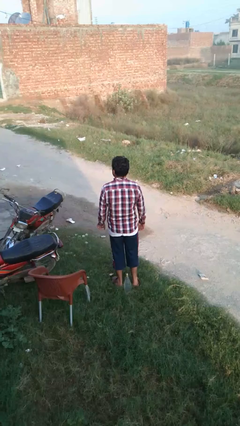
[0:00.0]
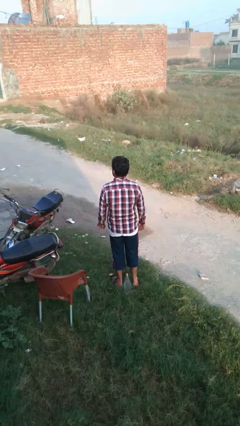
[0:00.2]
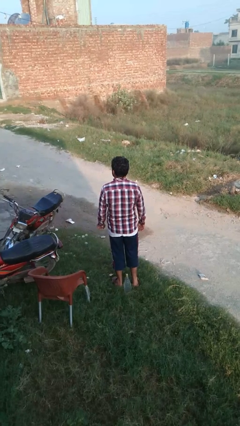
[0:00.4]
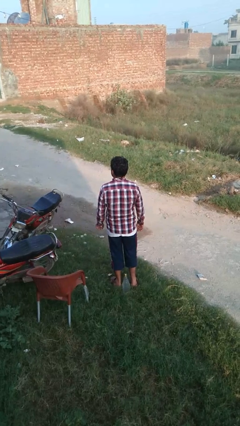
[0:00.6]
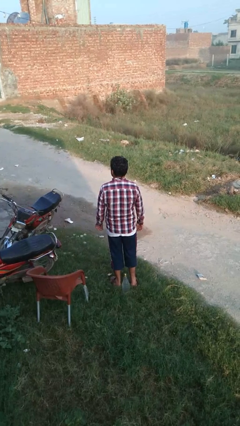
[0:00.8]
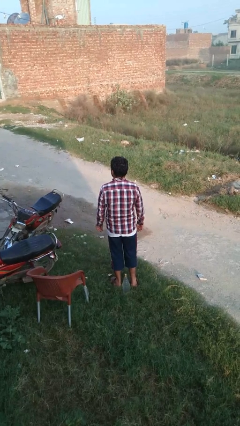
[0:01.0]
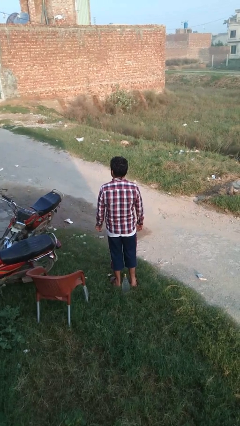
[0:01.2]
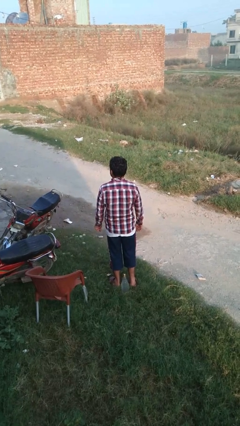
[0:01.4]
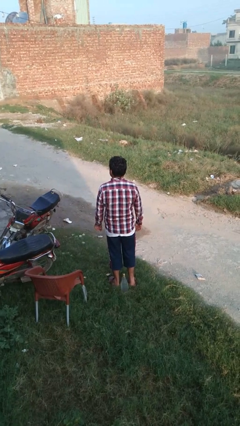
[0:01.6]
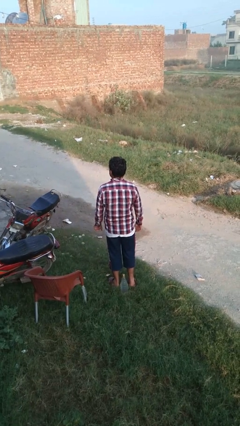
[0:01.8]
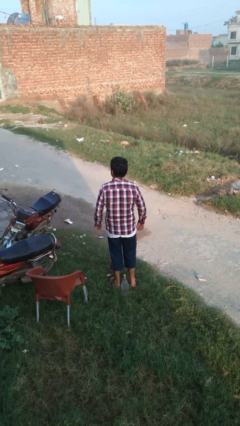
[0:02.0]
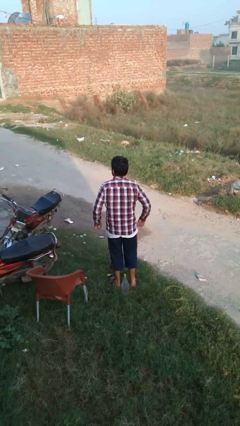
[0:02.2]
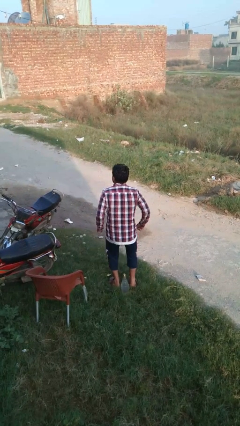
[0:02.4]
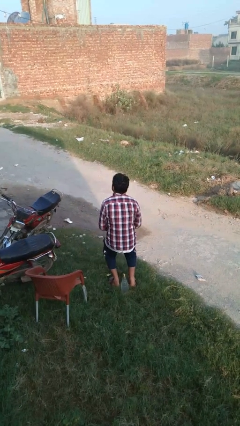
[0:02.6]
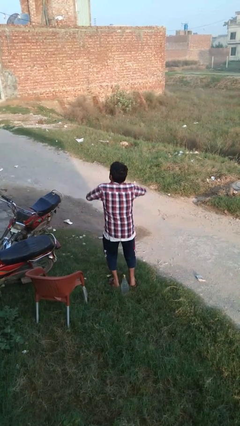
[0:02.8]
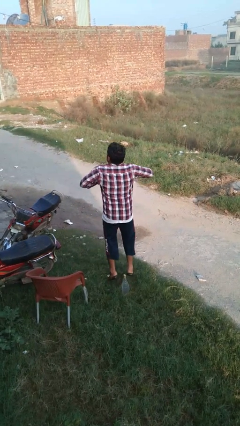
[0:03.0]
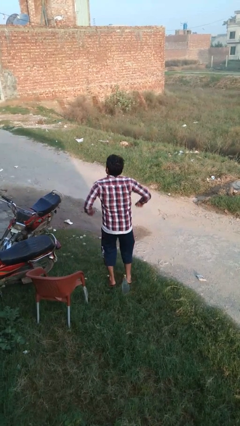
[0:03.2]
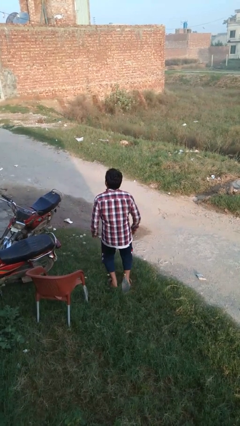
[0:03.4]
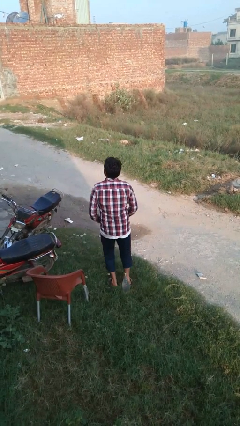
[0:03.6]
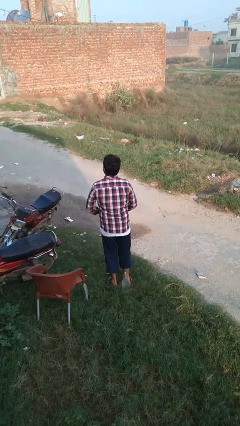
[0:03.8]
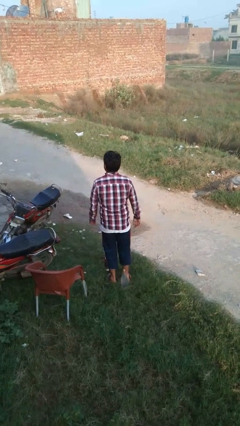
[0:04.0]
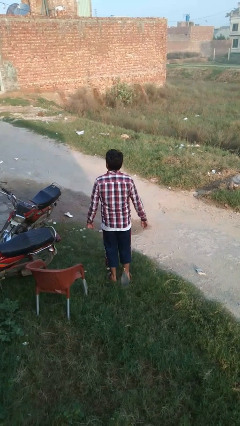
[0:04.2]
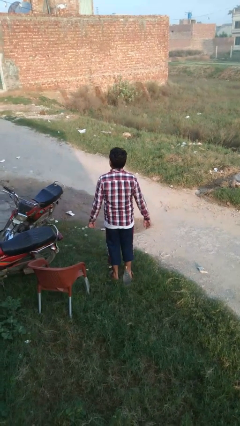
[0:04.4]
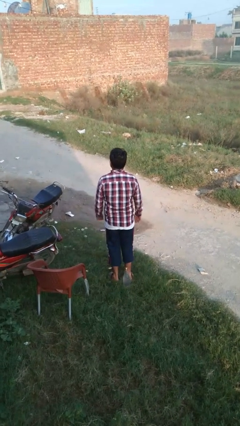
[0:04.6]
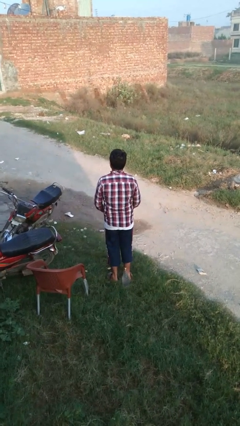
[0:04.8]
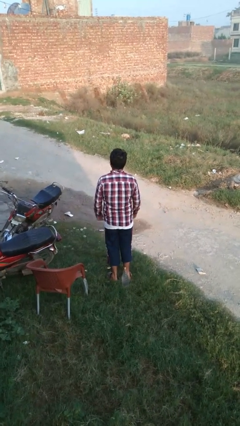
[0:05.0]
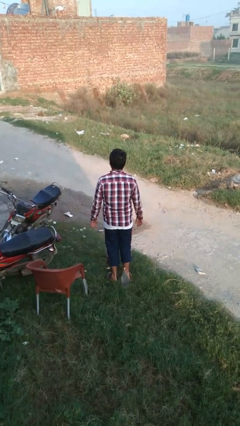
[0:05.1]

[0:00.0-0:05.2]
person jumps

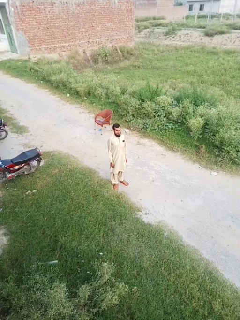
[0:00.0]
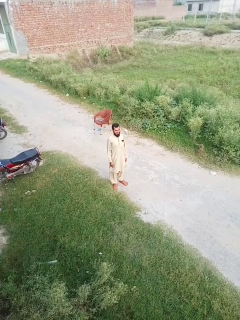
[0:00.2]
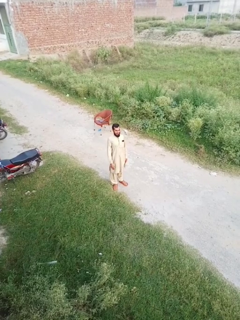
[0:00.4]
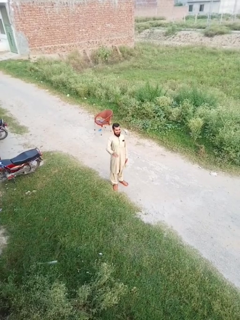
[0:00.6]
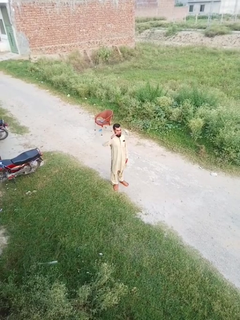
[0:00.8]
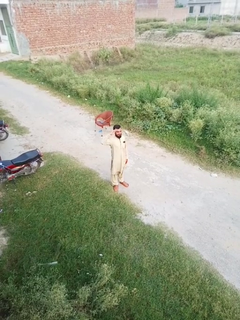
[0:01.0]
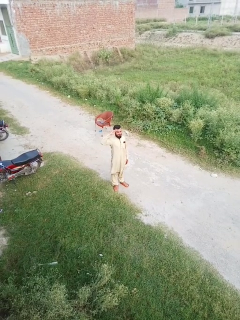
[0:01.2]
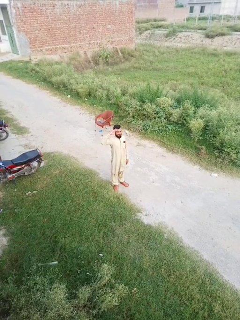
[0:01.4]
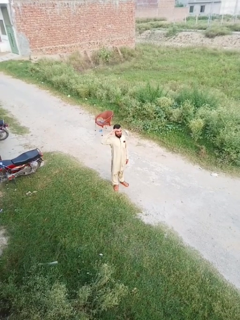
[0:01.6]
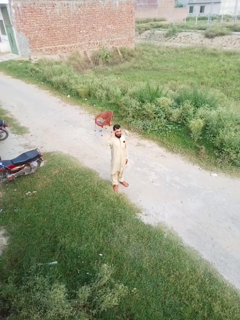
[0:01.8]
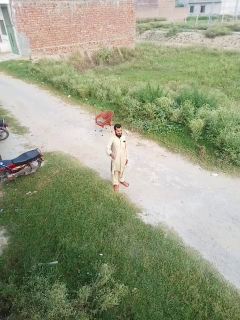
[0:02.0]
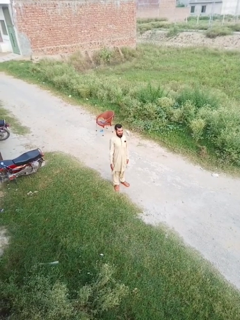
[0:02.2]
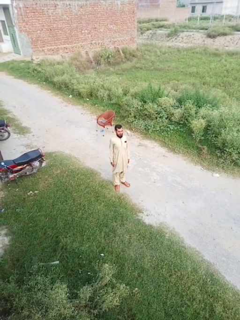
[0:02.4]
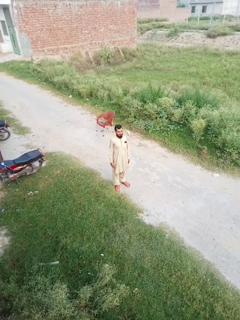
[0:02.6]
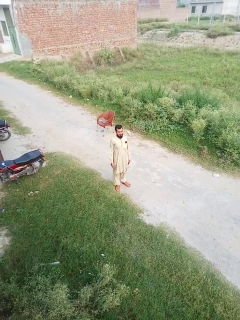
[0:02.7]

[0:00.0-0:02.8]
person salutes

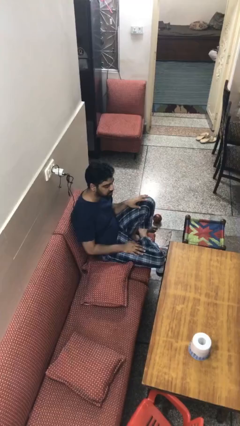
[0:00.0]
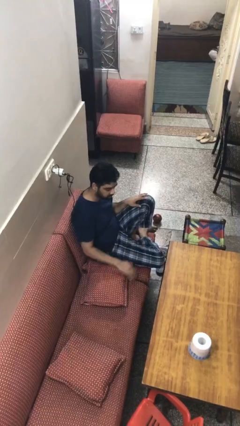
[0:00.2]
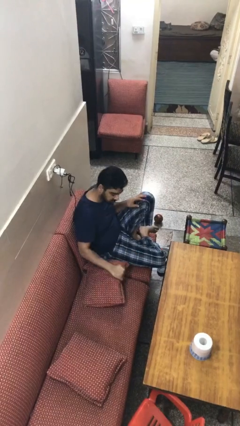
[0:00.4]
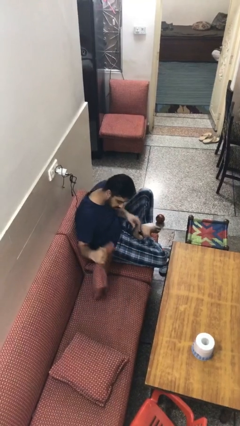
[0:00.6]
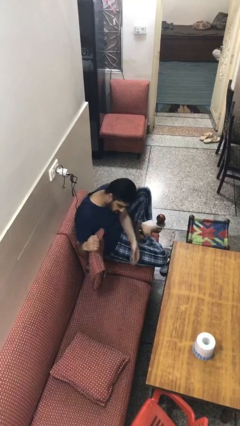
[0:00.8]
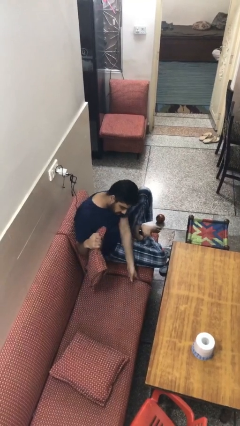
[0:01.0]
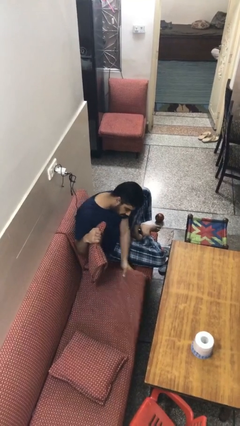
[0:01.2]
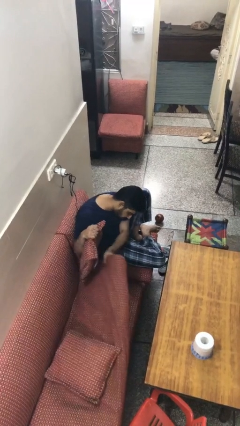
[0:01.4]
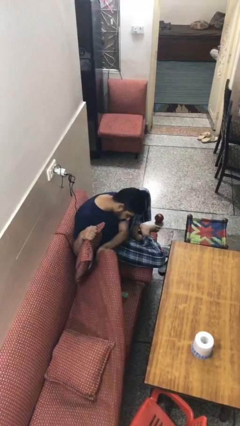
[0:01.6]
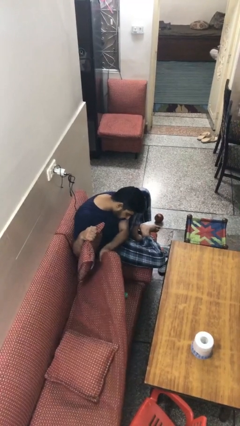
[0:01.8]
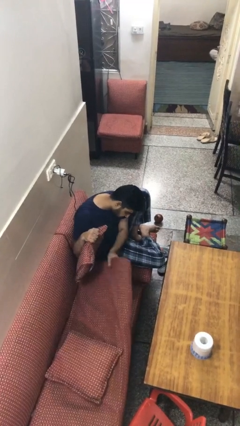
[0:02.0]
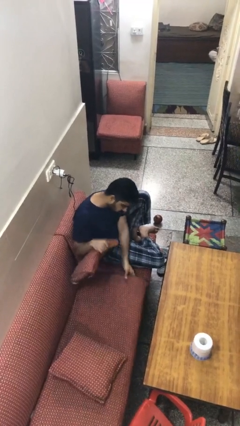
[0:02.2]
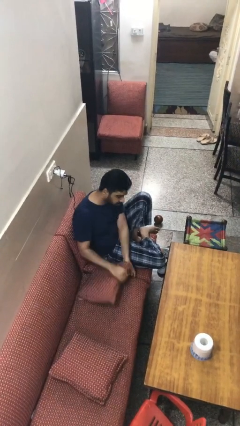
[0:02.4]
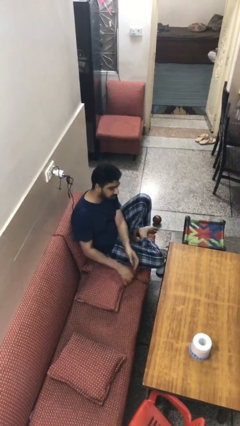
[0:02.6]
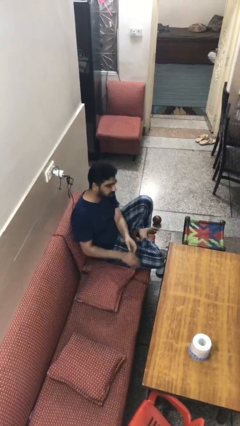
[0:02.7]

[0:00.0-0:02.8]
person searches under couch

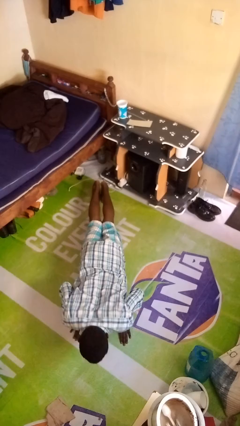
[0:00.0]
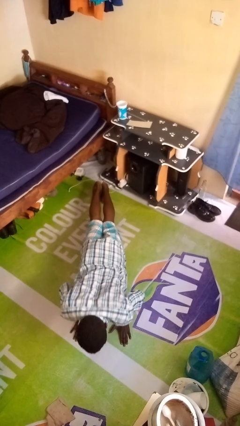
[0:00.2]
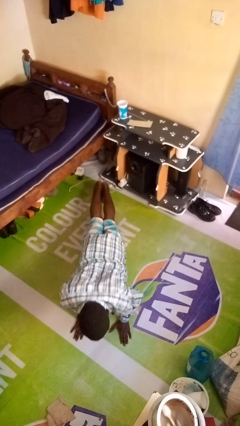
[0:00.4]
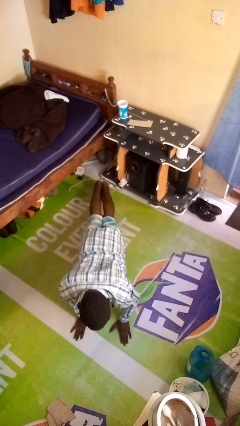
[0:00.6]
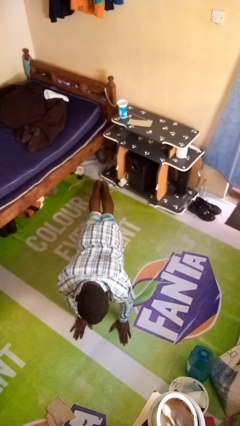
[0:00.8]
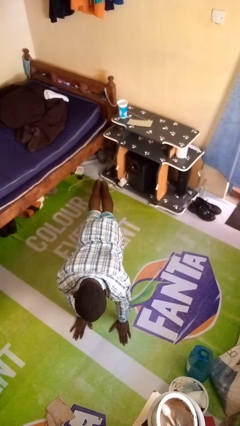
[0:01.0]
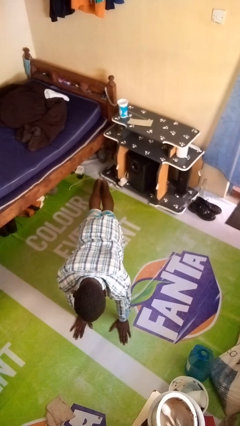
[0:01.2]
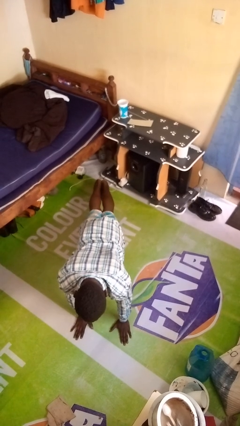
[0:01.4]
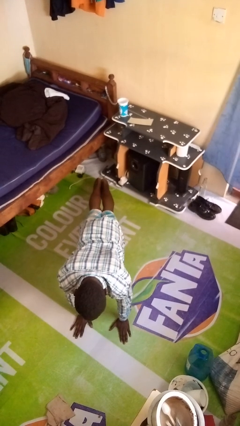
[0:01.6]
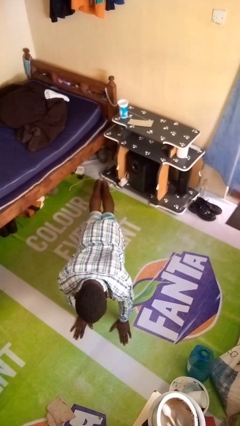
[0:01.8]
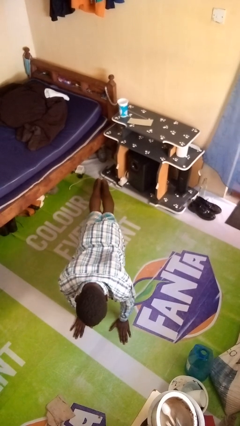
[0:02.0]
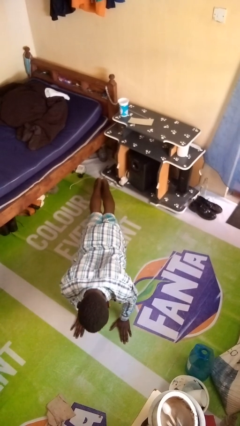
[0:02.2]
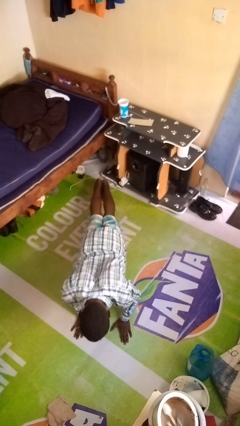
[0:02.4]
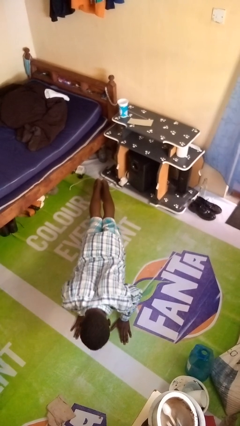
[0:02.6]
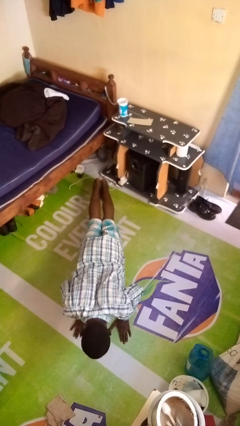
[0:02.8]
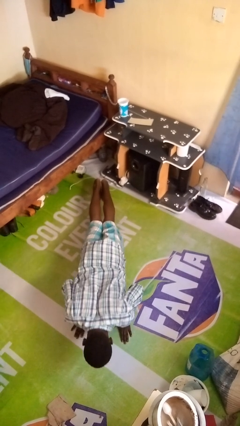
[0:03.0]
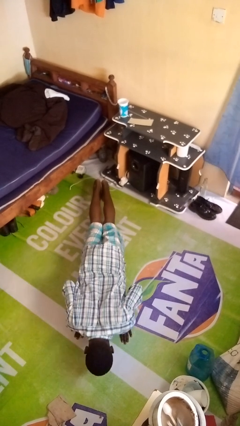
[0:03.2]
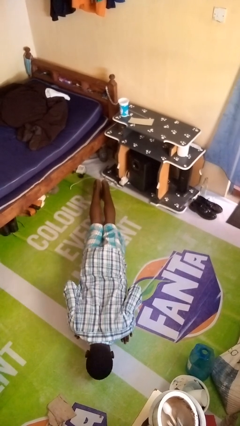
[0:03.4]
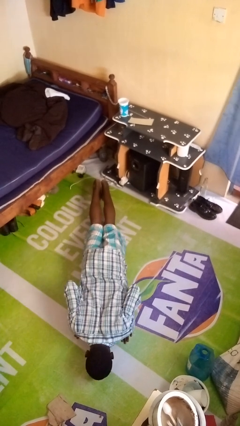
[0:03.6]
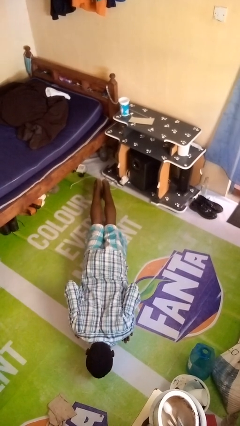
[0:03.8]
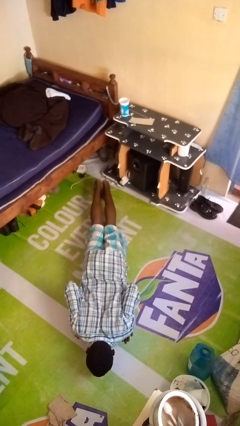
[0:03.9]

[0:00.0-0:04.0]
person exercises with pushup

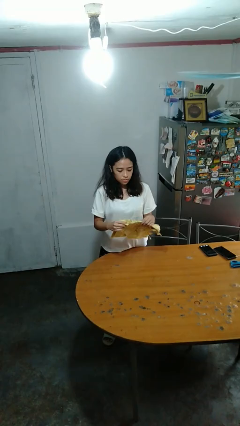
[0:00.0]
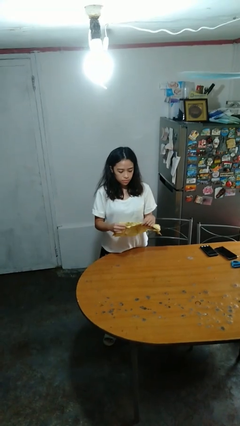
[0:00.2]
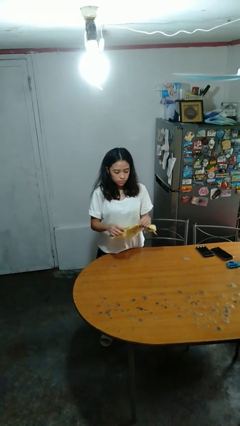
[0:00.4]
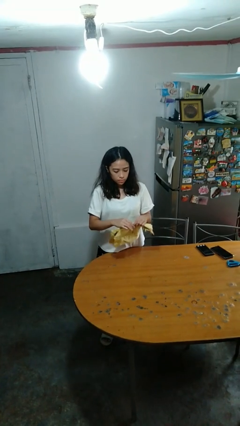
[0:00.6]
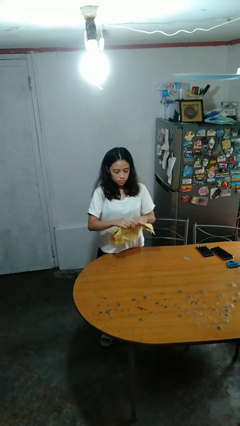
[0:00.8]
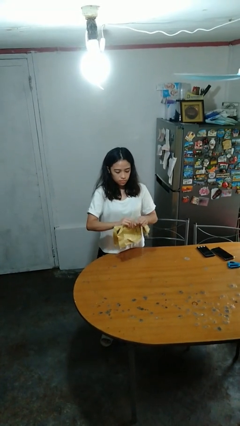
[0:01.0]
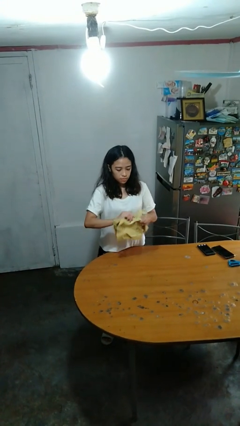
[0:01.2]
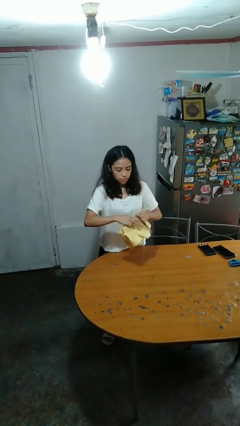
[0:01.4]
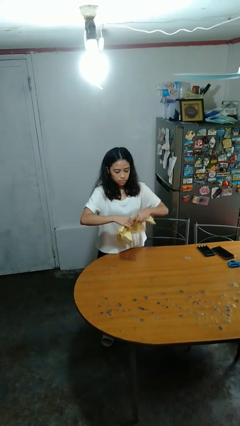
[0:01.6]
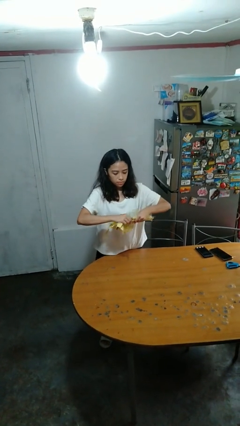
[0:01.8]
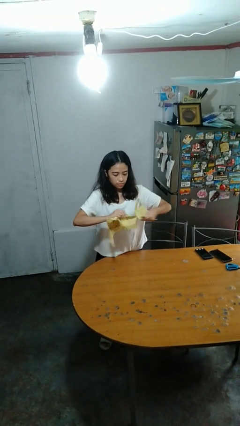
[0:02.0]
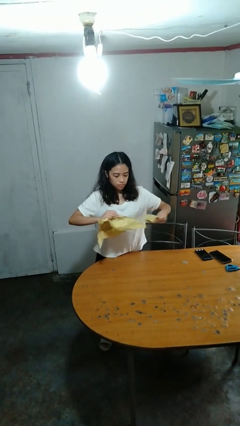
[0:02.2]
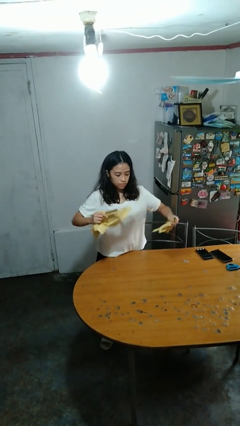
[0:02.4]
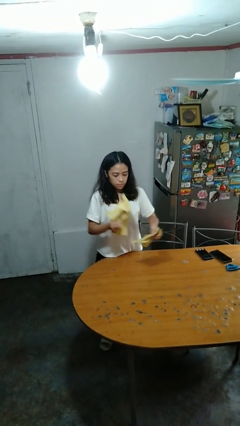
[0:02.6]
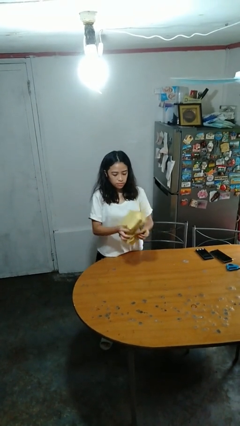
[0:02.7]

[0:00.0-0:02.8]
person tears paper

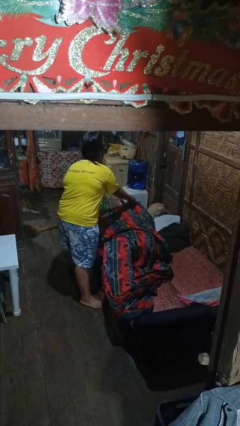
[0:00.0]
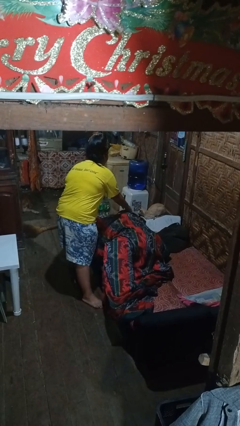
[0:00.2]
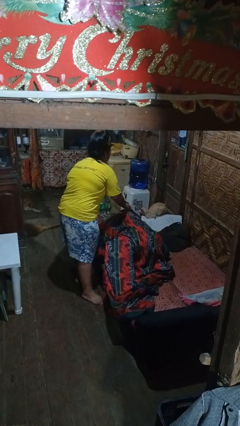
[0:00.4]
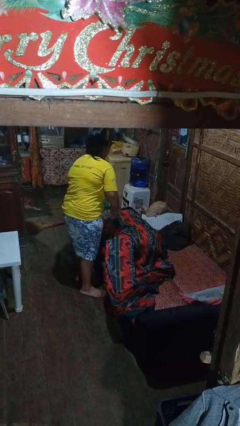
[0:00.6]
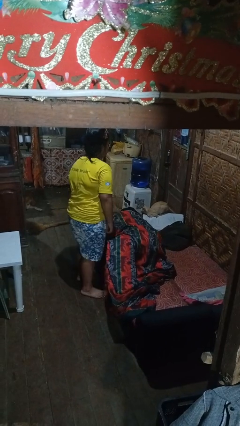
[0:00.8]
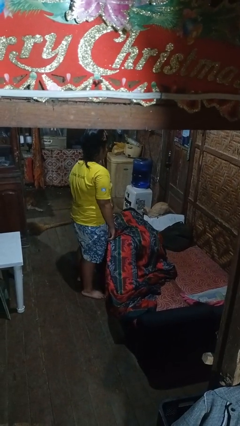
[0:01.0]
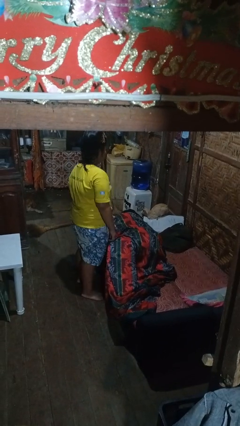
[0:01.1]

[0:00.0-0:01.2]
person covers friend with blanket
